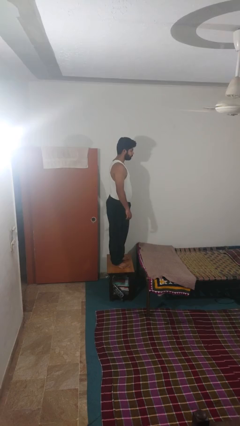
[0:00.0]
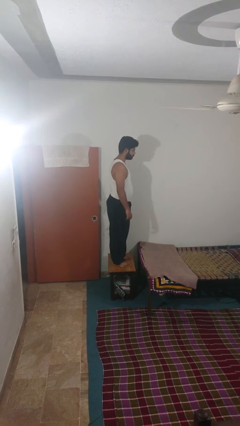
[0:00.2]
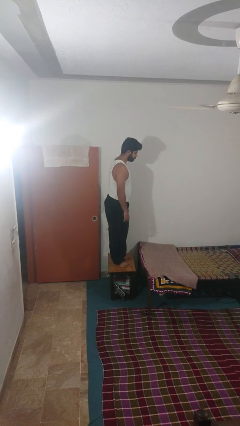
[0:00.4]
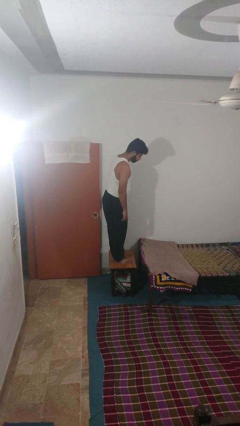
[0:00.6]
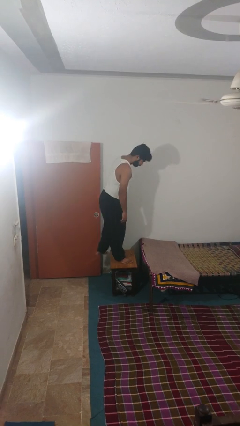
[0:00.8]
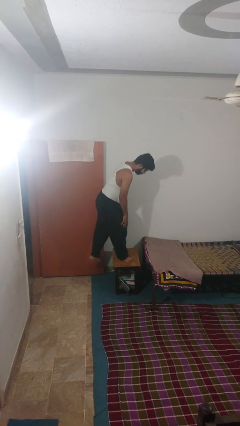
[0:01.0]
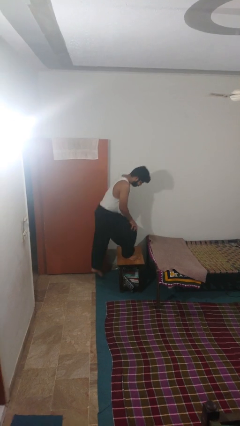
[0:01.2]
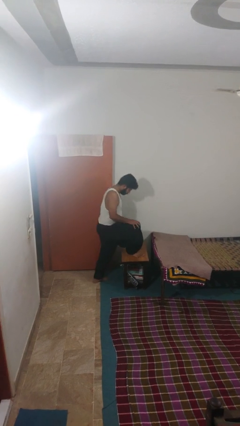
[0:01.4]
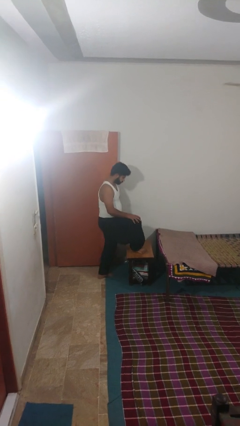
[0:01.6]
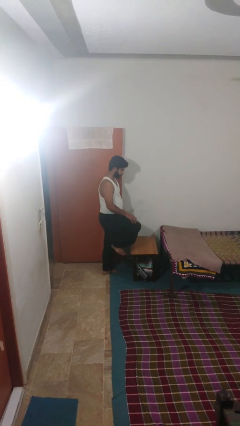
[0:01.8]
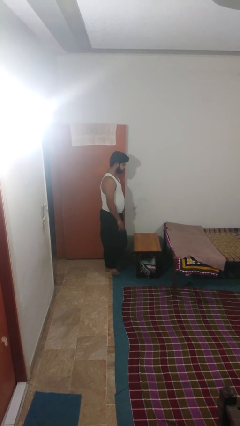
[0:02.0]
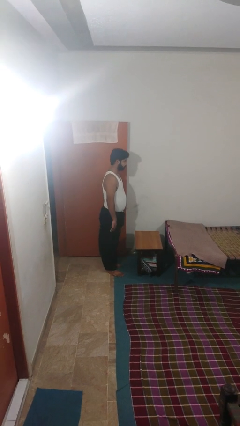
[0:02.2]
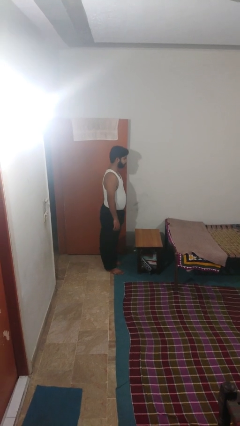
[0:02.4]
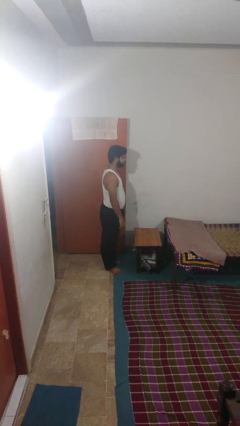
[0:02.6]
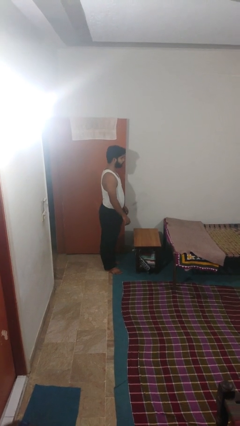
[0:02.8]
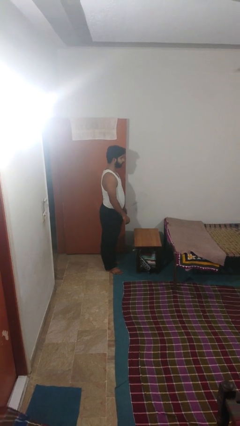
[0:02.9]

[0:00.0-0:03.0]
person climbs off table

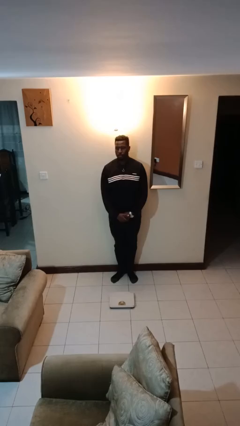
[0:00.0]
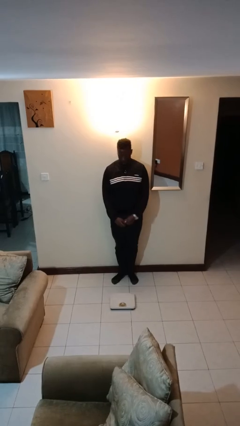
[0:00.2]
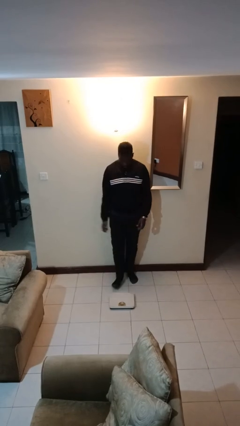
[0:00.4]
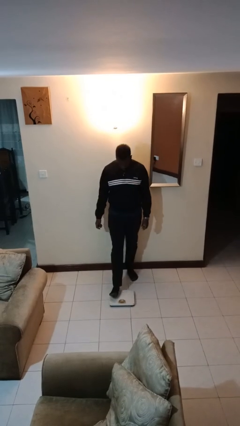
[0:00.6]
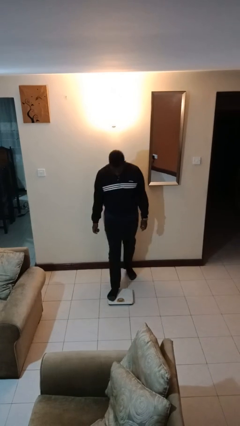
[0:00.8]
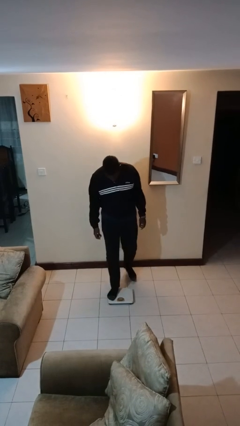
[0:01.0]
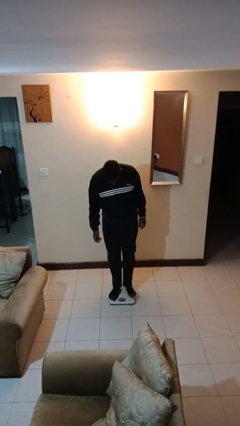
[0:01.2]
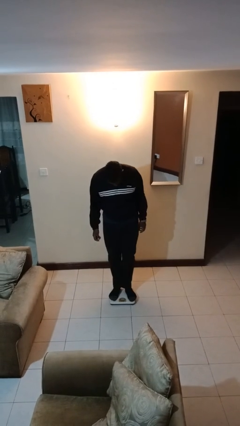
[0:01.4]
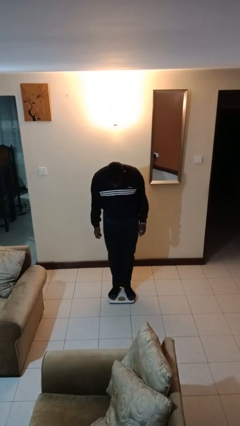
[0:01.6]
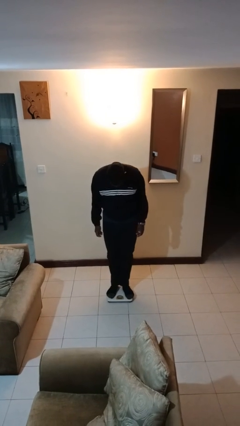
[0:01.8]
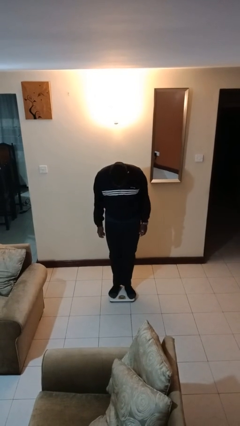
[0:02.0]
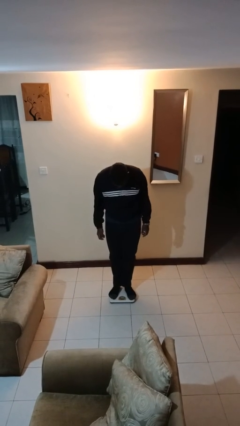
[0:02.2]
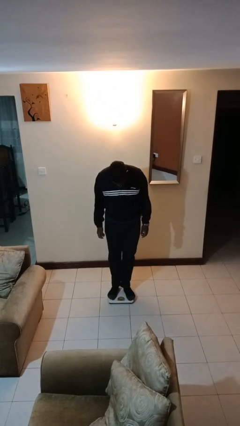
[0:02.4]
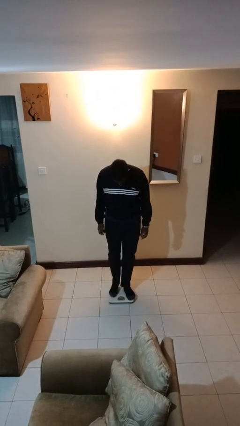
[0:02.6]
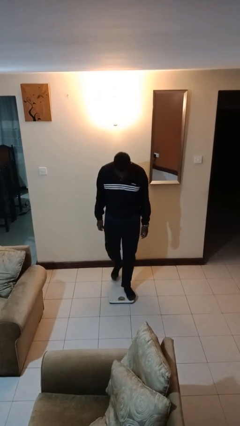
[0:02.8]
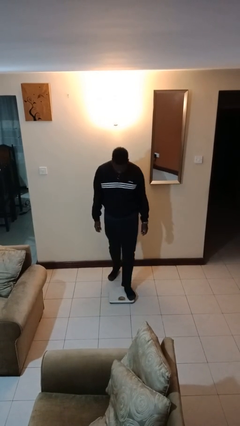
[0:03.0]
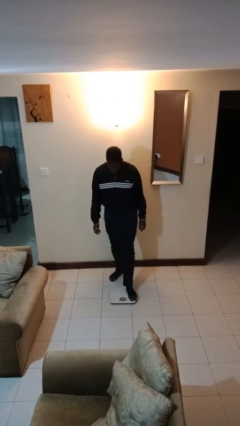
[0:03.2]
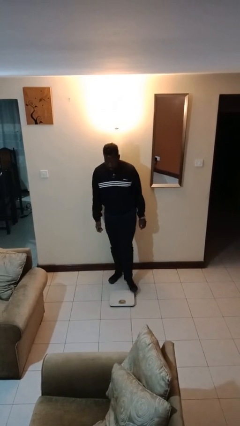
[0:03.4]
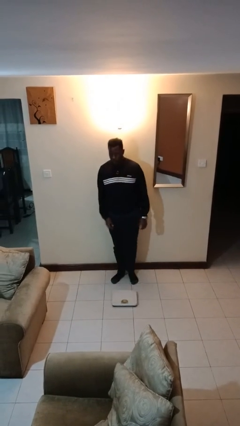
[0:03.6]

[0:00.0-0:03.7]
person uses bodyweight scale

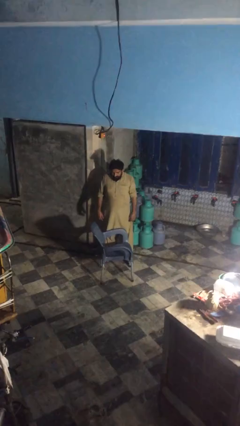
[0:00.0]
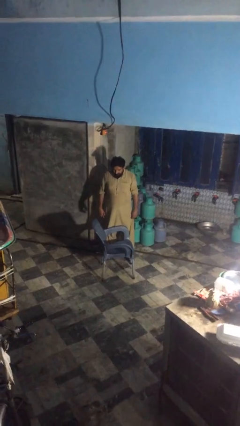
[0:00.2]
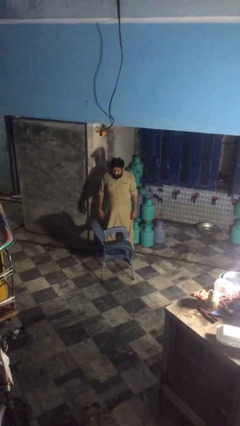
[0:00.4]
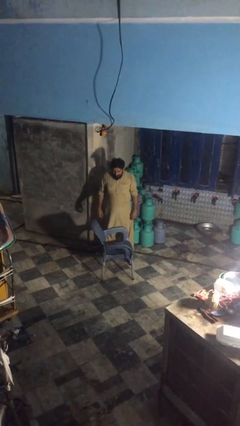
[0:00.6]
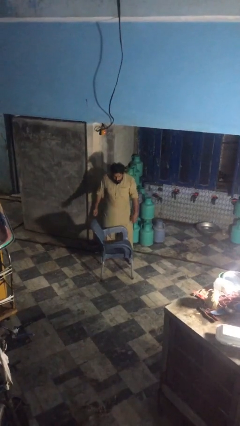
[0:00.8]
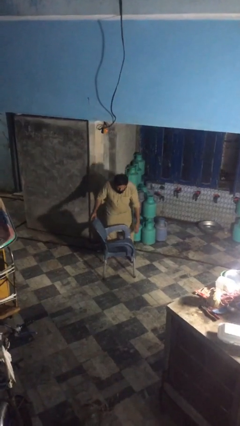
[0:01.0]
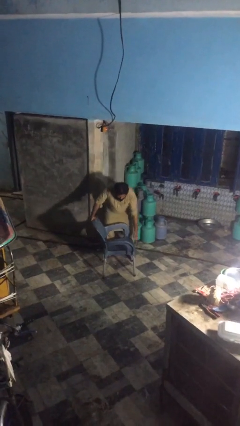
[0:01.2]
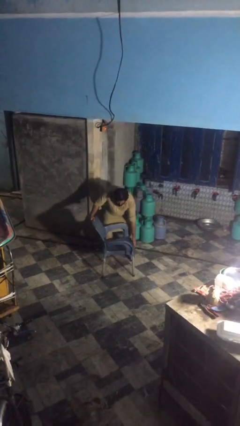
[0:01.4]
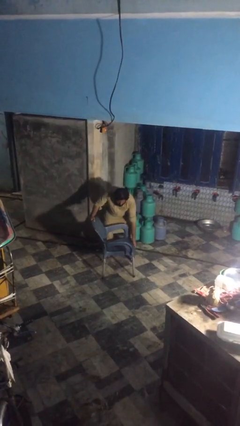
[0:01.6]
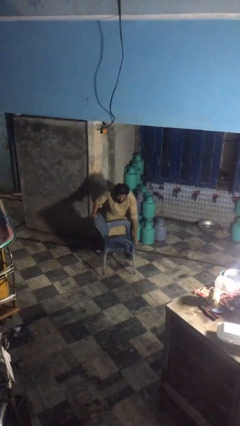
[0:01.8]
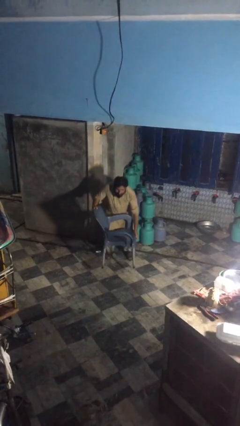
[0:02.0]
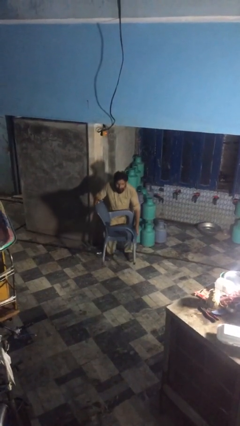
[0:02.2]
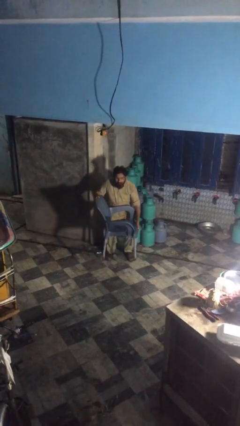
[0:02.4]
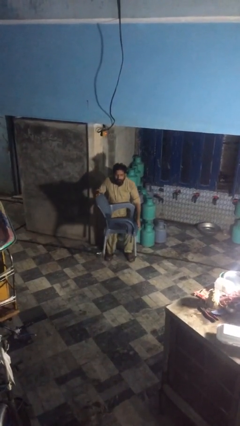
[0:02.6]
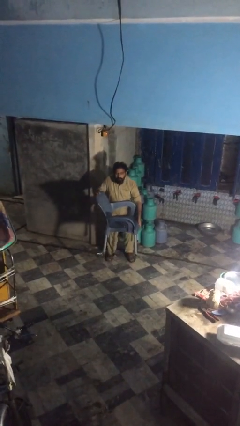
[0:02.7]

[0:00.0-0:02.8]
person picks up object from floor

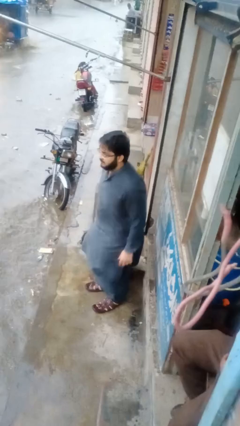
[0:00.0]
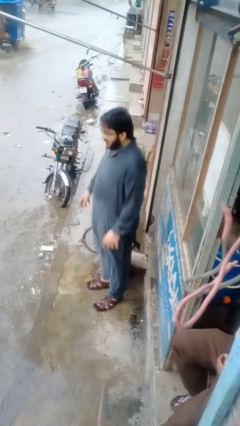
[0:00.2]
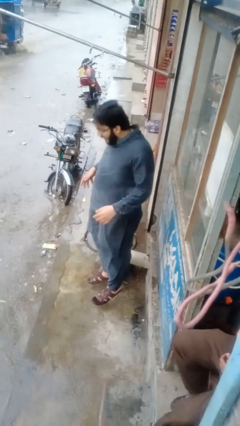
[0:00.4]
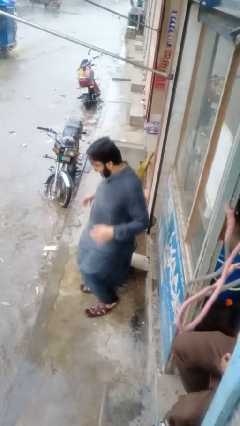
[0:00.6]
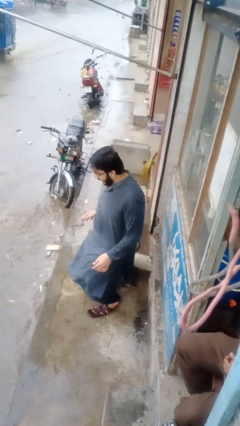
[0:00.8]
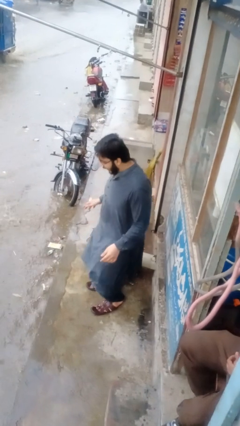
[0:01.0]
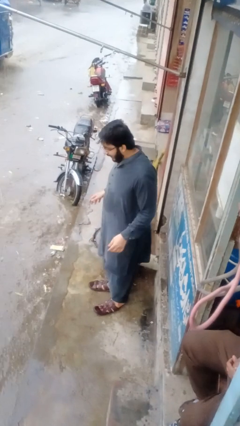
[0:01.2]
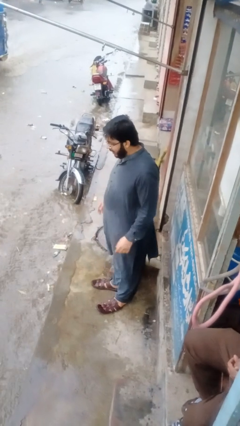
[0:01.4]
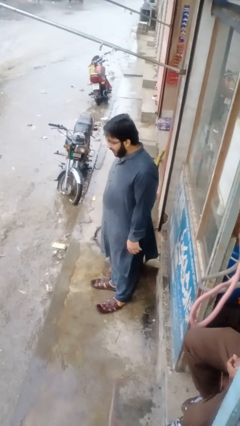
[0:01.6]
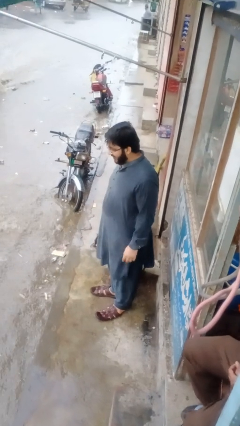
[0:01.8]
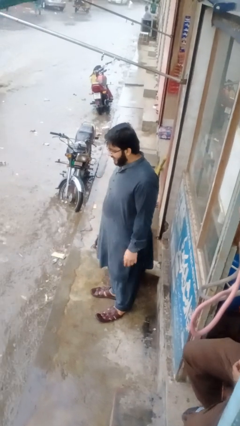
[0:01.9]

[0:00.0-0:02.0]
person jumps

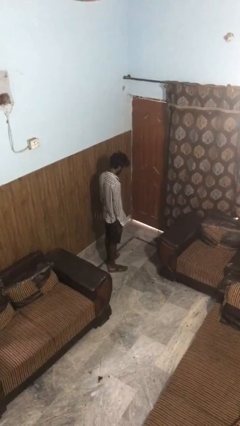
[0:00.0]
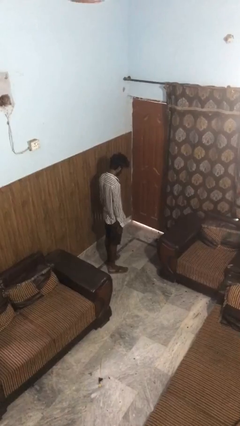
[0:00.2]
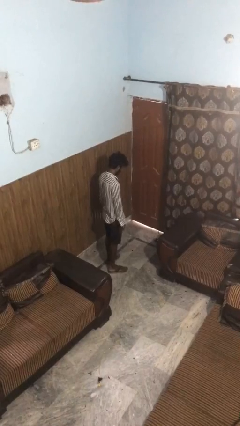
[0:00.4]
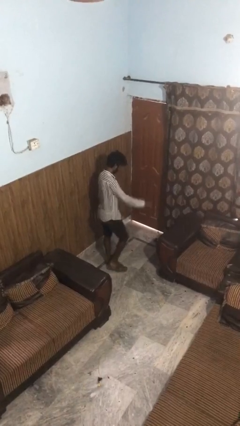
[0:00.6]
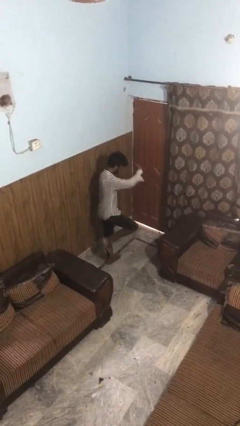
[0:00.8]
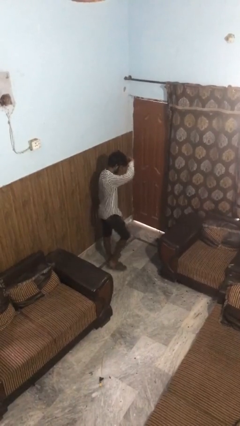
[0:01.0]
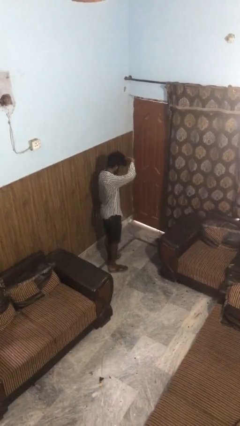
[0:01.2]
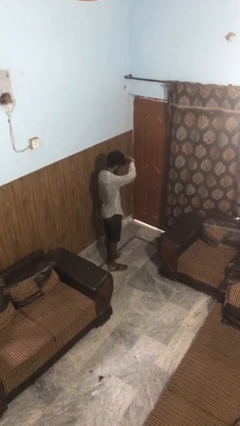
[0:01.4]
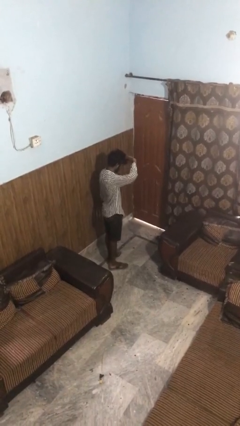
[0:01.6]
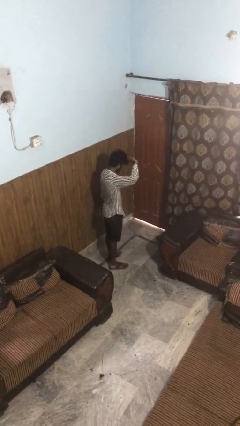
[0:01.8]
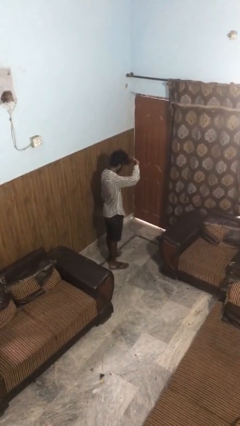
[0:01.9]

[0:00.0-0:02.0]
person salutes

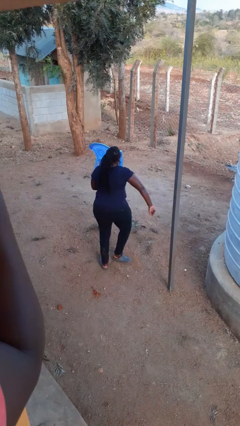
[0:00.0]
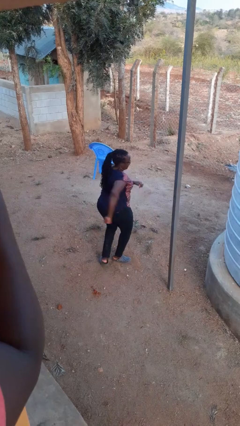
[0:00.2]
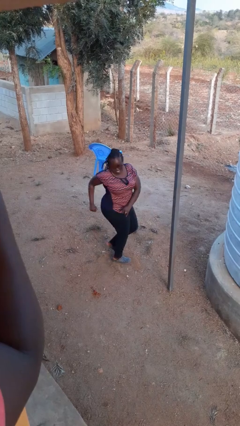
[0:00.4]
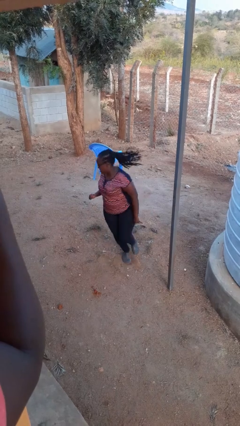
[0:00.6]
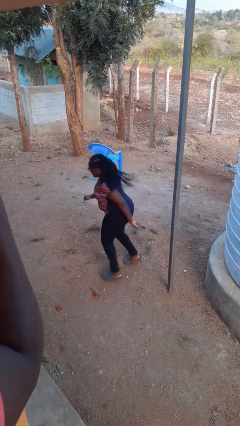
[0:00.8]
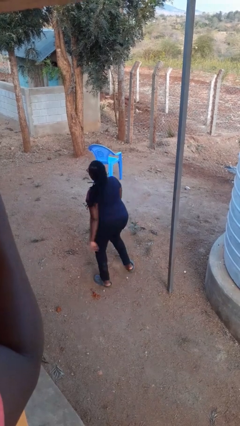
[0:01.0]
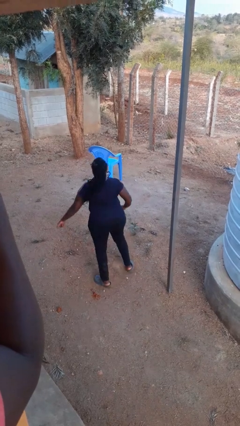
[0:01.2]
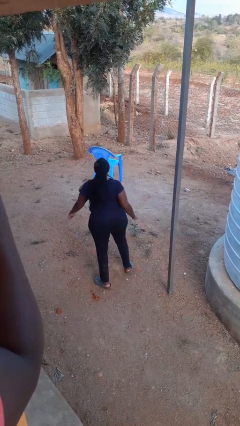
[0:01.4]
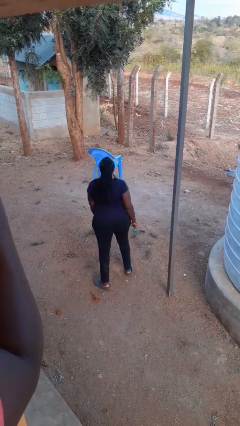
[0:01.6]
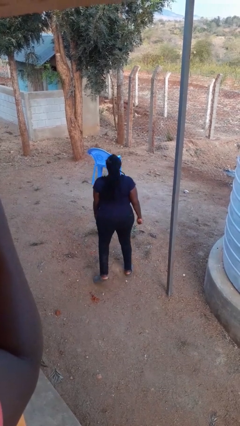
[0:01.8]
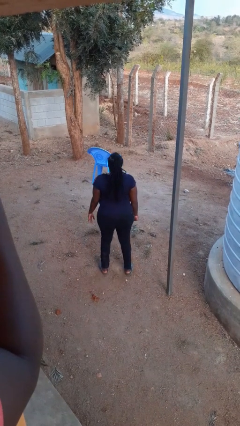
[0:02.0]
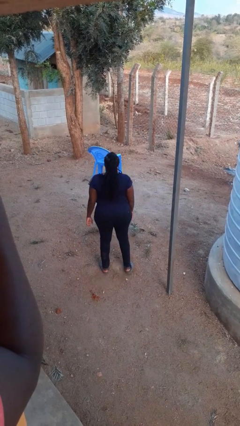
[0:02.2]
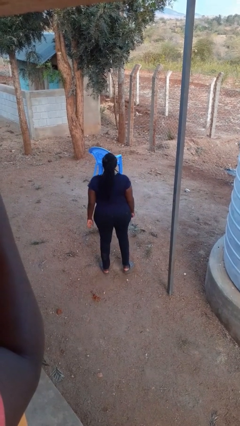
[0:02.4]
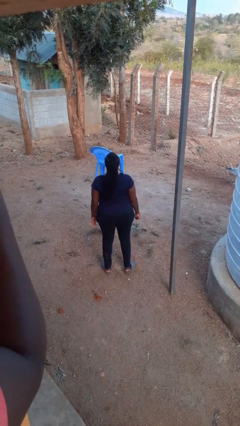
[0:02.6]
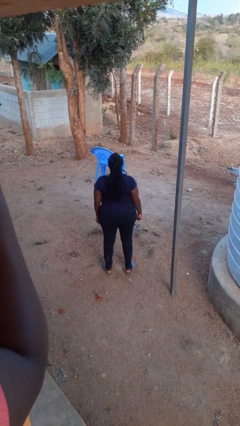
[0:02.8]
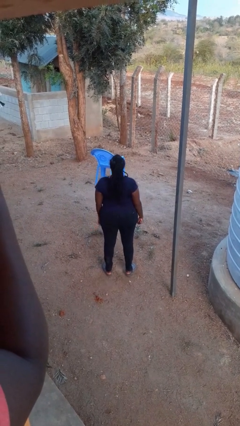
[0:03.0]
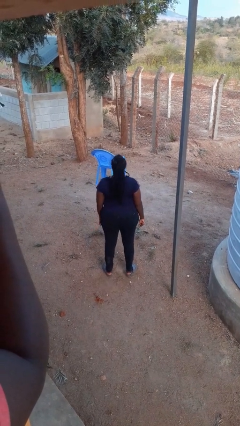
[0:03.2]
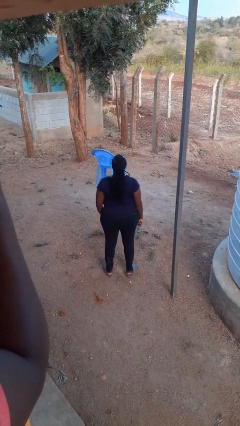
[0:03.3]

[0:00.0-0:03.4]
person twirls

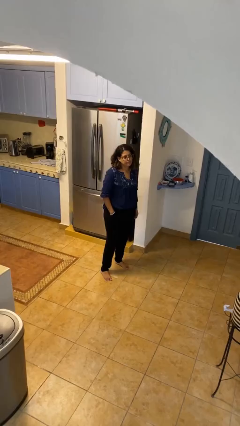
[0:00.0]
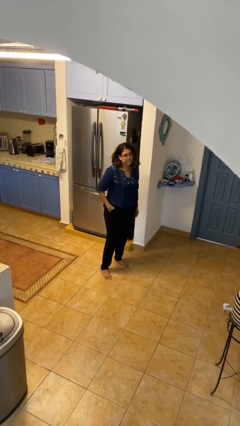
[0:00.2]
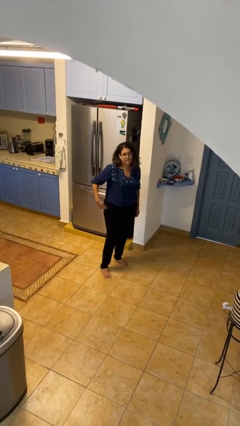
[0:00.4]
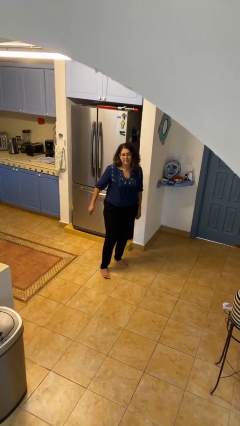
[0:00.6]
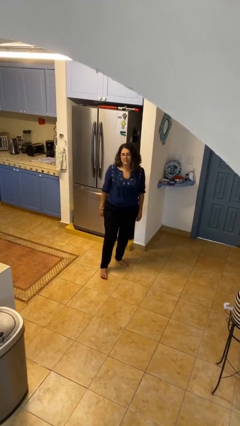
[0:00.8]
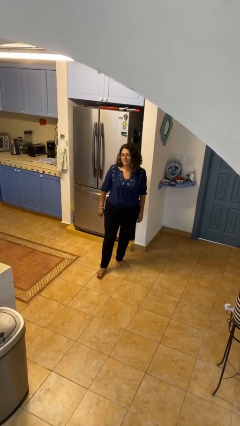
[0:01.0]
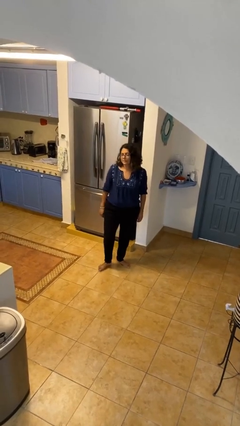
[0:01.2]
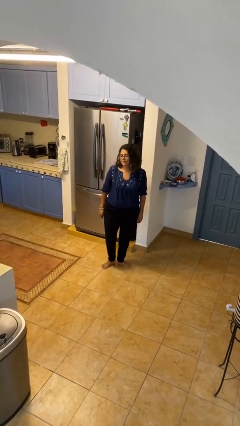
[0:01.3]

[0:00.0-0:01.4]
person puts hands in back pockets
